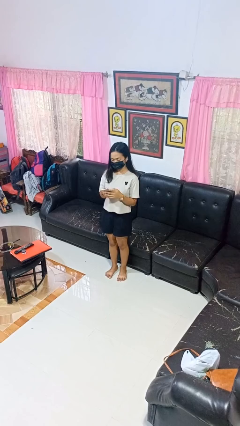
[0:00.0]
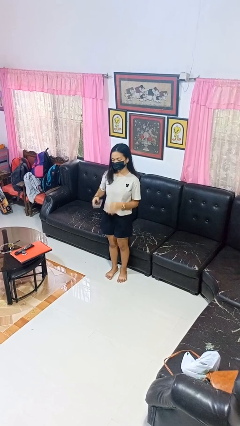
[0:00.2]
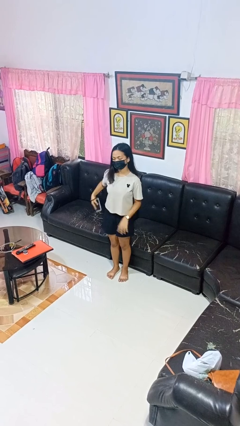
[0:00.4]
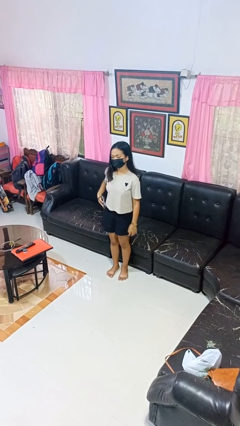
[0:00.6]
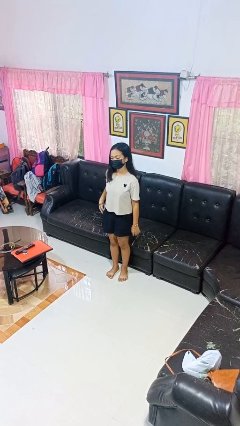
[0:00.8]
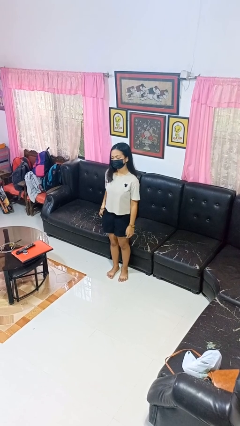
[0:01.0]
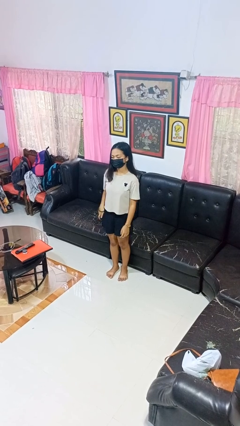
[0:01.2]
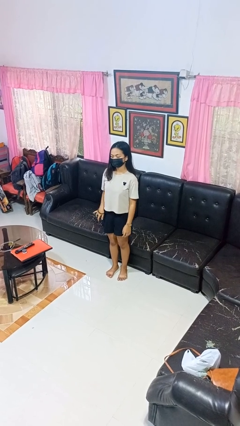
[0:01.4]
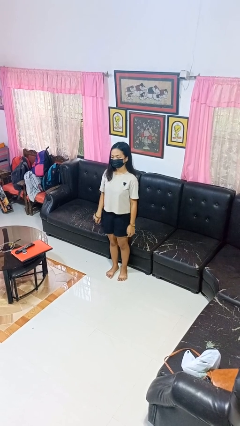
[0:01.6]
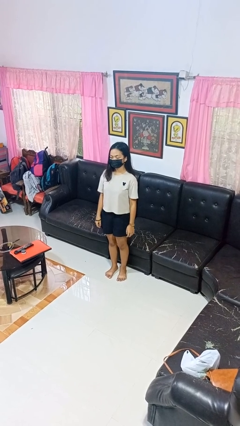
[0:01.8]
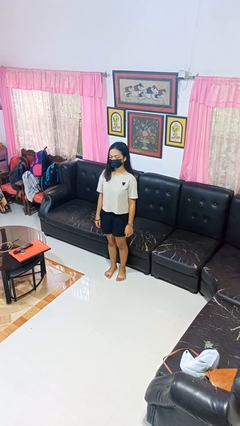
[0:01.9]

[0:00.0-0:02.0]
person puts phone into pocket

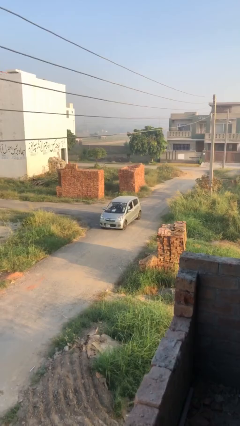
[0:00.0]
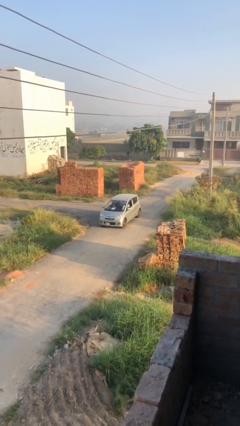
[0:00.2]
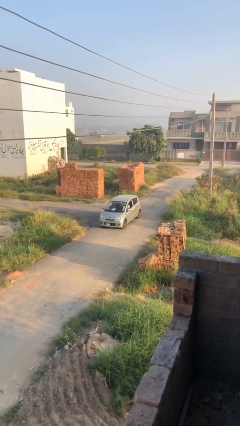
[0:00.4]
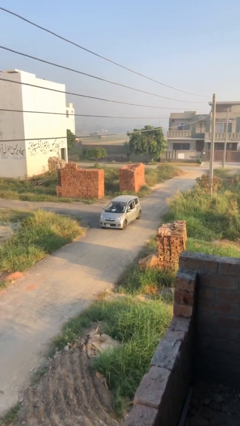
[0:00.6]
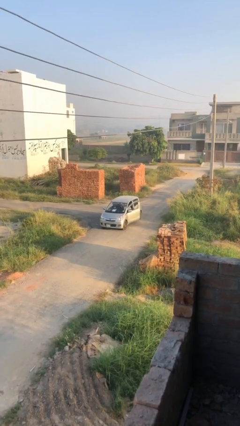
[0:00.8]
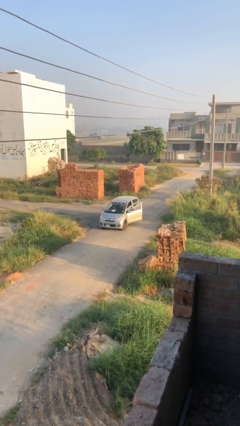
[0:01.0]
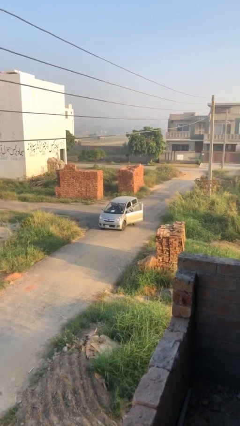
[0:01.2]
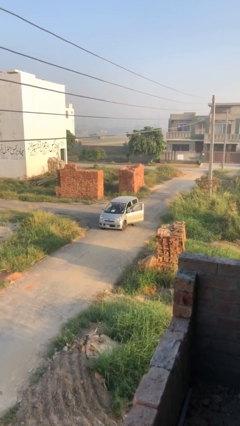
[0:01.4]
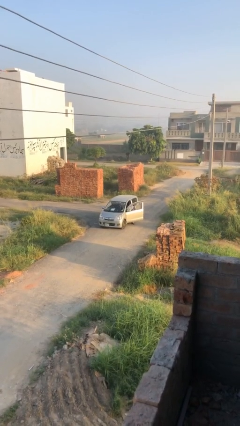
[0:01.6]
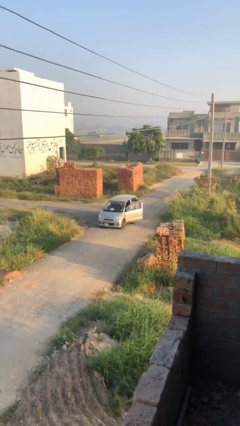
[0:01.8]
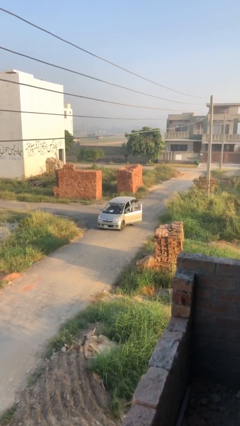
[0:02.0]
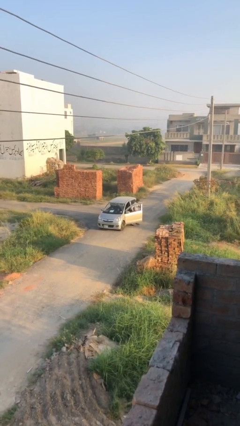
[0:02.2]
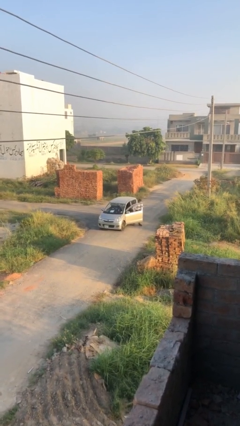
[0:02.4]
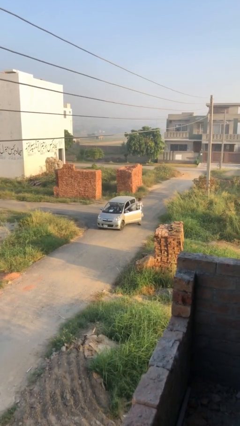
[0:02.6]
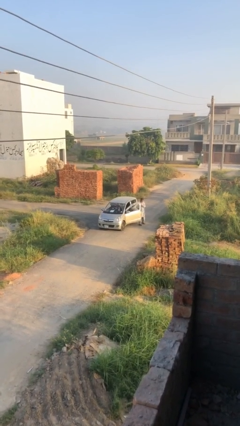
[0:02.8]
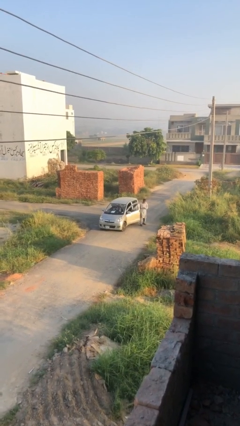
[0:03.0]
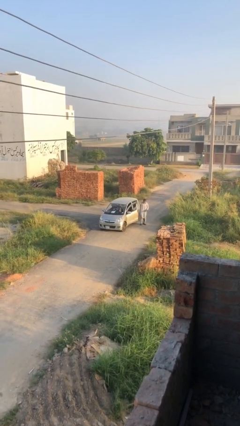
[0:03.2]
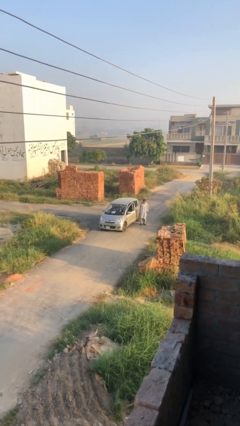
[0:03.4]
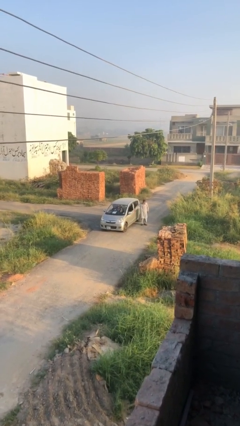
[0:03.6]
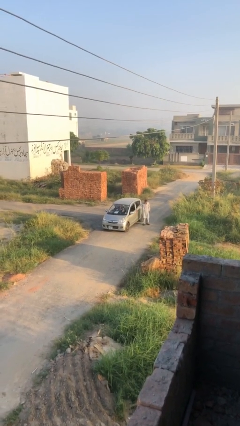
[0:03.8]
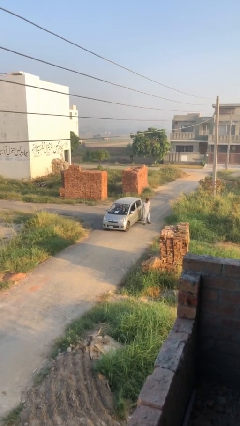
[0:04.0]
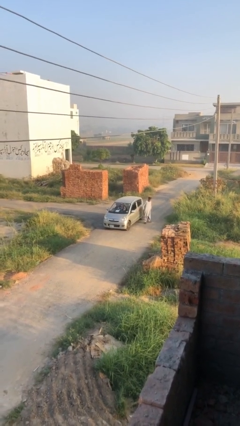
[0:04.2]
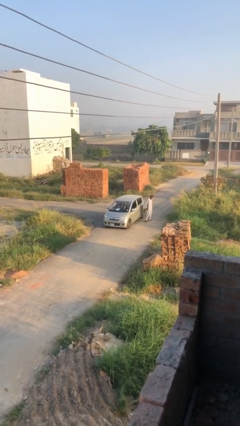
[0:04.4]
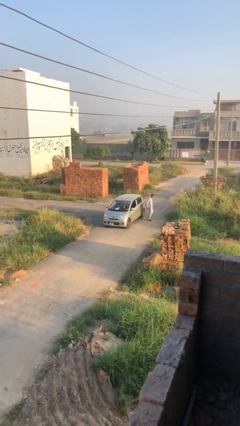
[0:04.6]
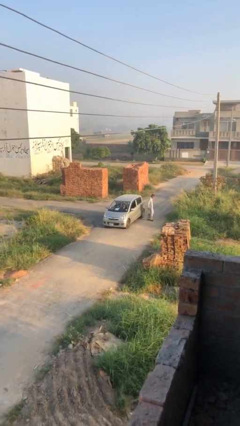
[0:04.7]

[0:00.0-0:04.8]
car drops off person

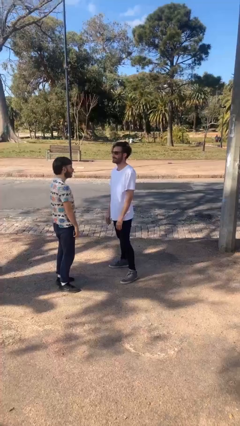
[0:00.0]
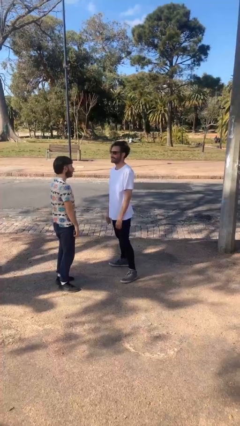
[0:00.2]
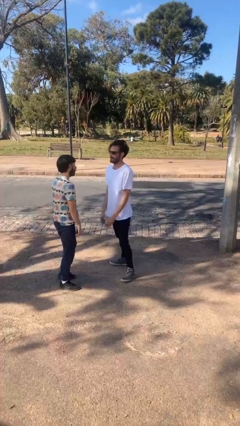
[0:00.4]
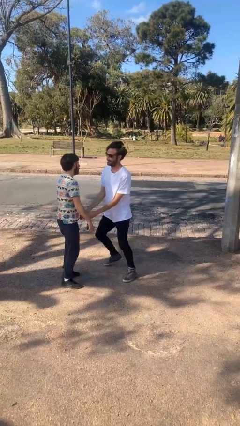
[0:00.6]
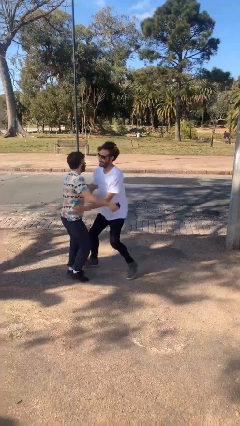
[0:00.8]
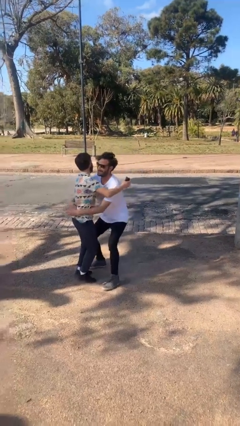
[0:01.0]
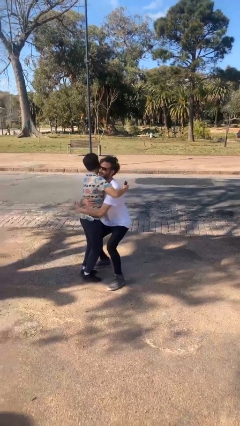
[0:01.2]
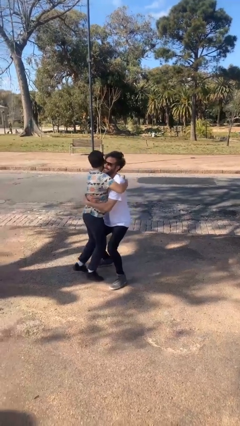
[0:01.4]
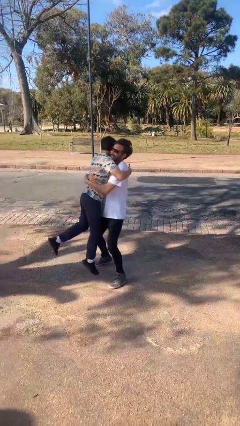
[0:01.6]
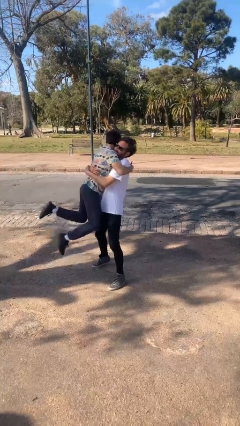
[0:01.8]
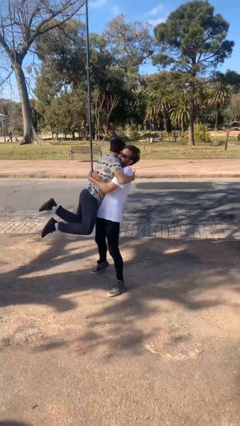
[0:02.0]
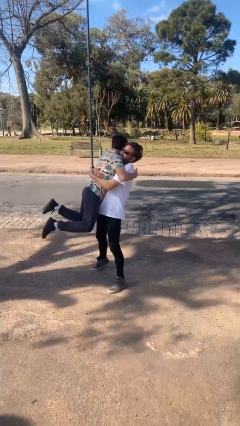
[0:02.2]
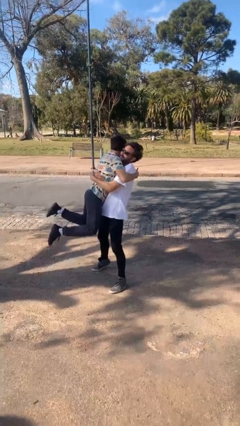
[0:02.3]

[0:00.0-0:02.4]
person picks up person

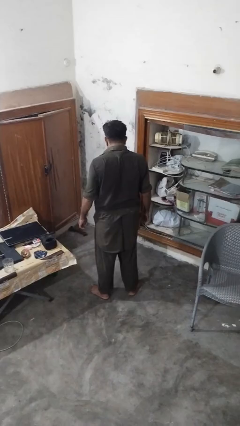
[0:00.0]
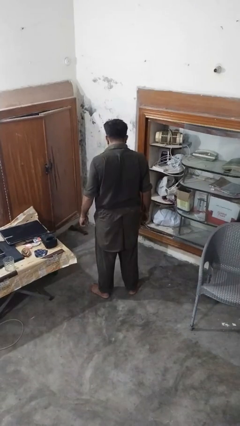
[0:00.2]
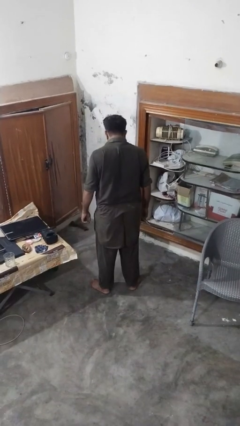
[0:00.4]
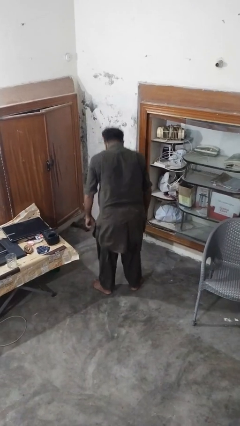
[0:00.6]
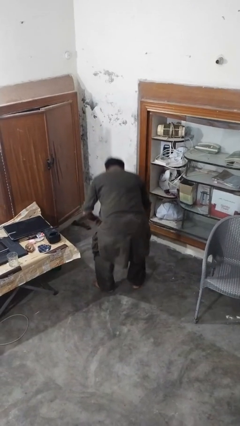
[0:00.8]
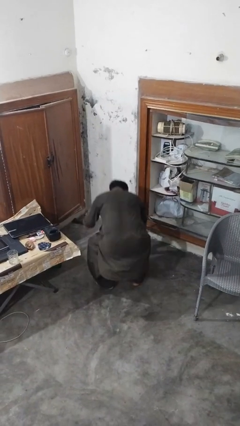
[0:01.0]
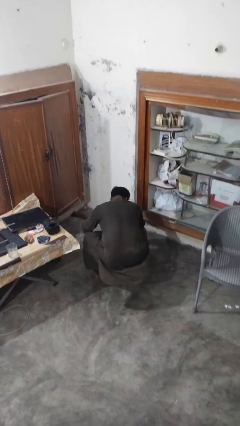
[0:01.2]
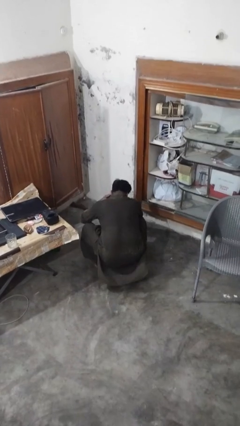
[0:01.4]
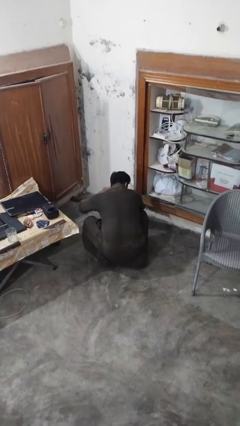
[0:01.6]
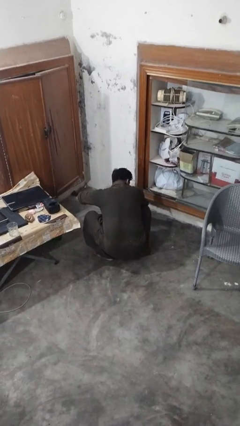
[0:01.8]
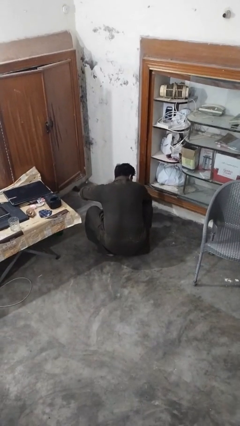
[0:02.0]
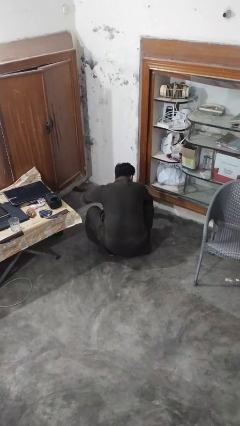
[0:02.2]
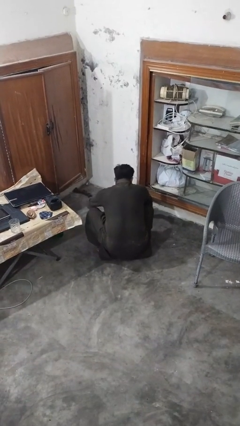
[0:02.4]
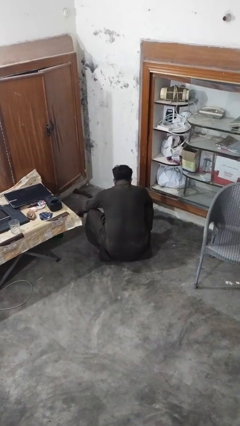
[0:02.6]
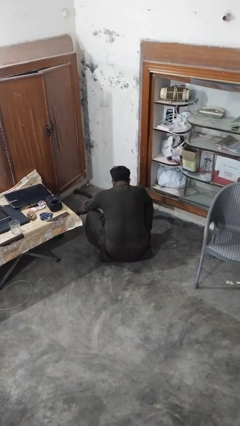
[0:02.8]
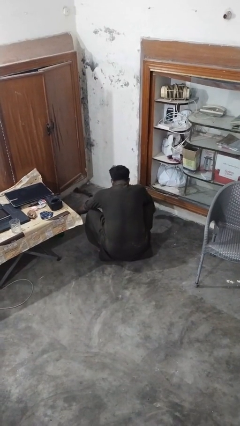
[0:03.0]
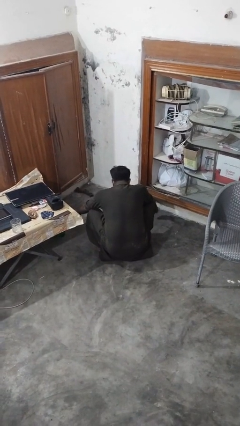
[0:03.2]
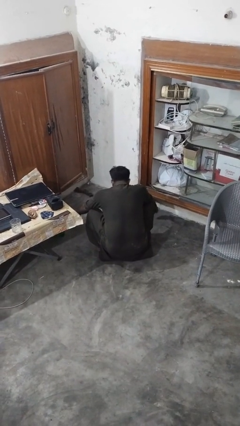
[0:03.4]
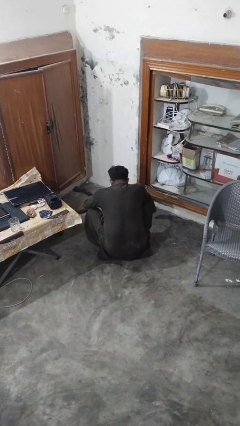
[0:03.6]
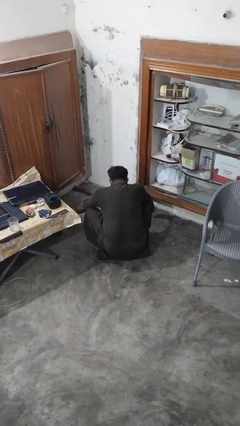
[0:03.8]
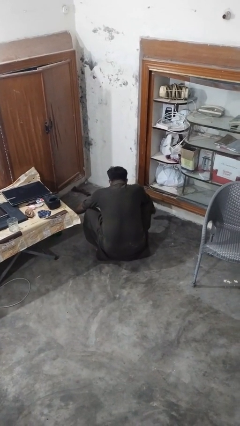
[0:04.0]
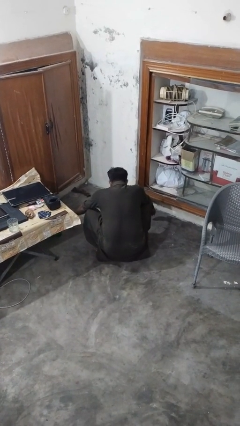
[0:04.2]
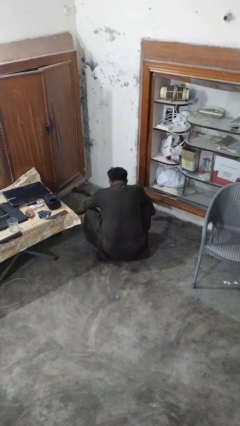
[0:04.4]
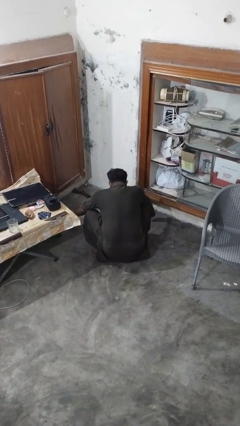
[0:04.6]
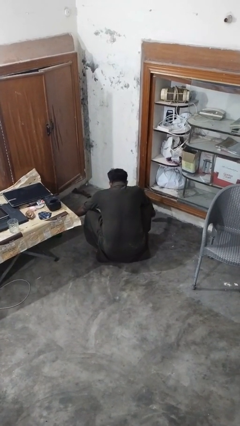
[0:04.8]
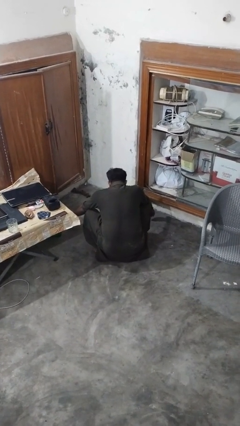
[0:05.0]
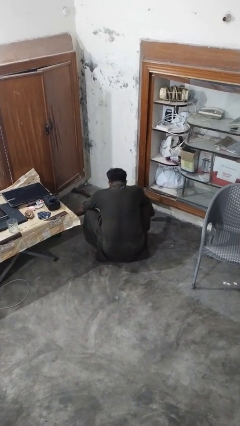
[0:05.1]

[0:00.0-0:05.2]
person squats

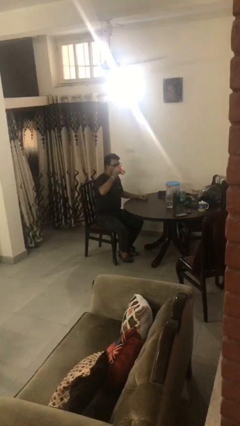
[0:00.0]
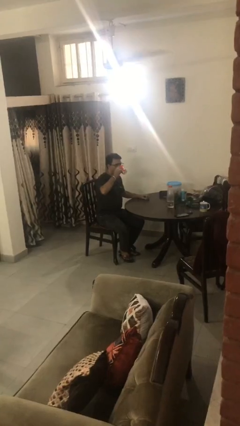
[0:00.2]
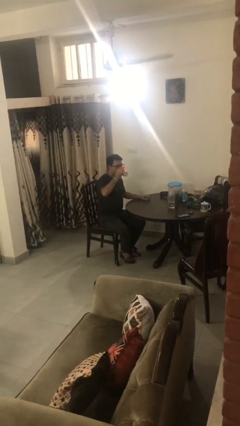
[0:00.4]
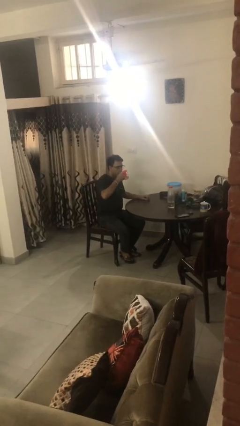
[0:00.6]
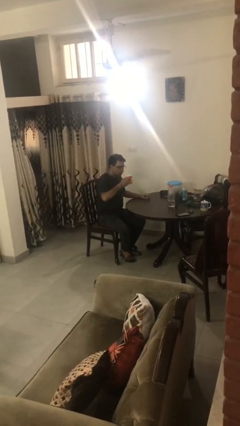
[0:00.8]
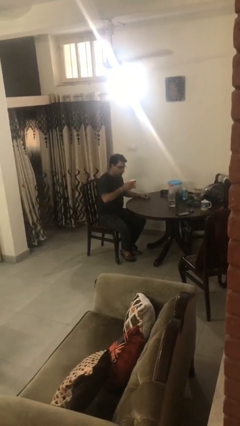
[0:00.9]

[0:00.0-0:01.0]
person puts down object on table

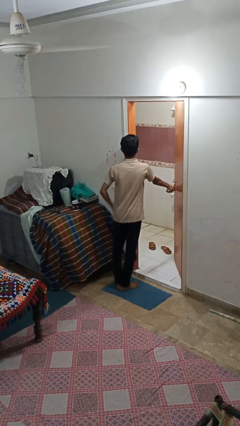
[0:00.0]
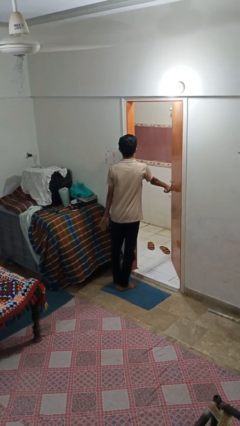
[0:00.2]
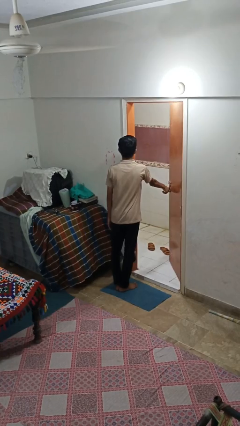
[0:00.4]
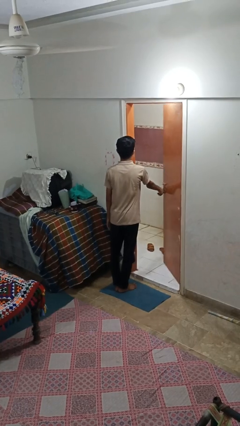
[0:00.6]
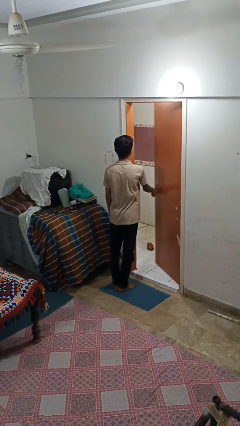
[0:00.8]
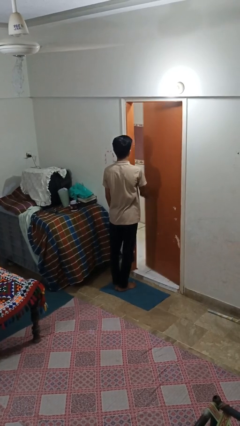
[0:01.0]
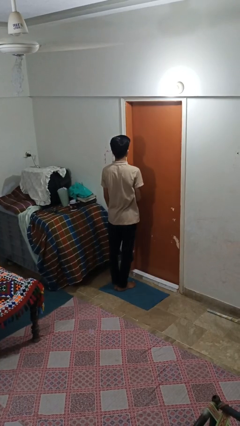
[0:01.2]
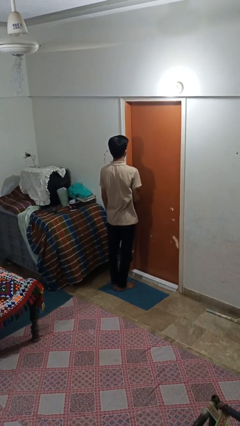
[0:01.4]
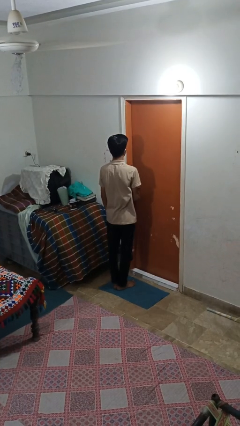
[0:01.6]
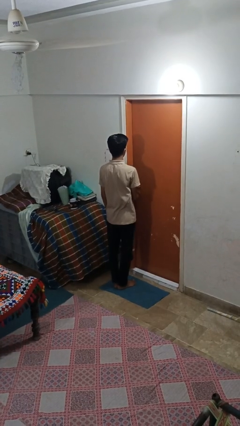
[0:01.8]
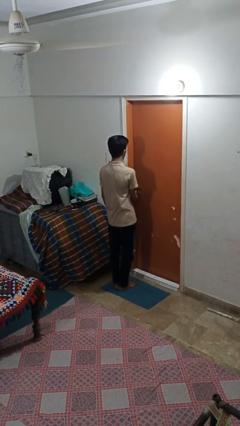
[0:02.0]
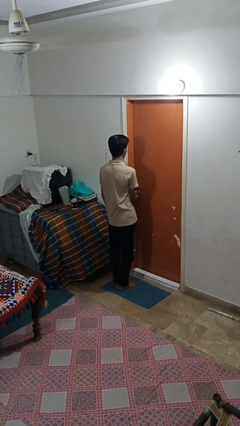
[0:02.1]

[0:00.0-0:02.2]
person closes facility door
